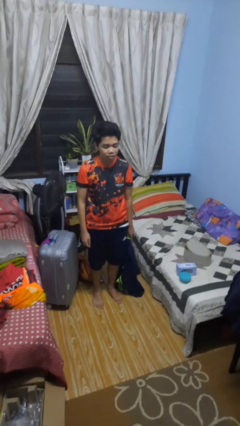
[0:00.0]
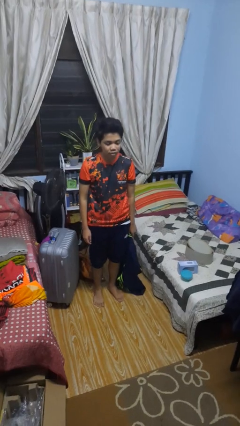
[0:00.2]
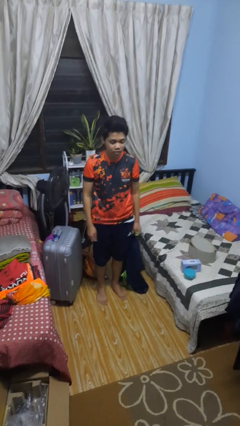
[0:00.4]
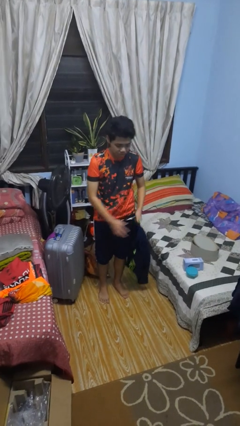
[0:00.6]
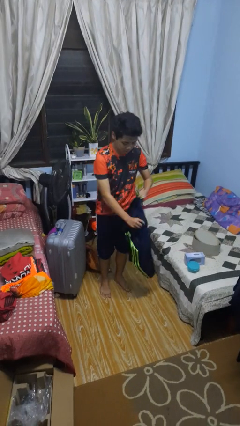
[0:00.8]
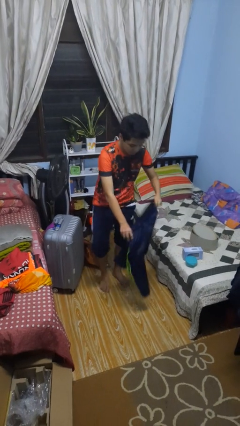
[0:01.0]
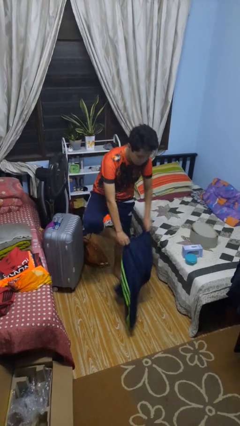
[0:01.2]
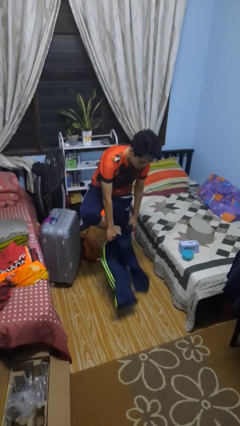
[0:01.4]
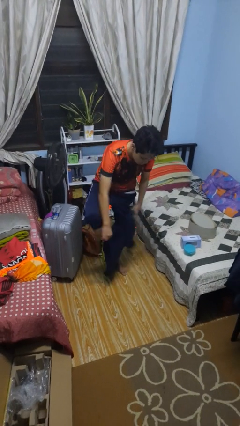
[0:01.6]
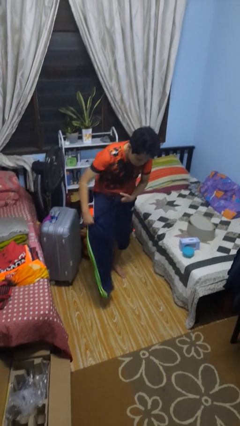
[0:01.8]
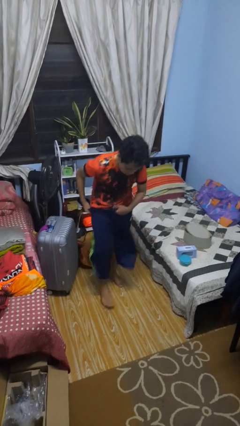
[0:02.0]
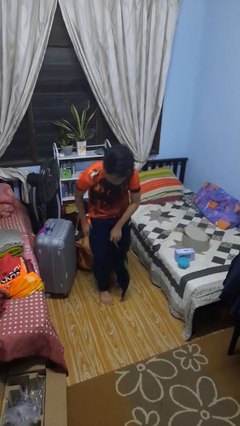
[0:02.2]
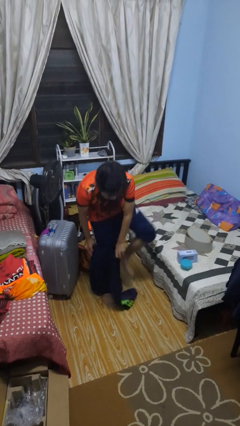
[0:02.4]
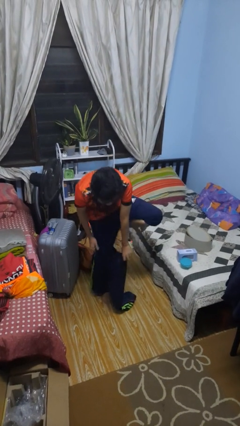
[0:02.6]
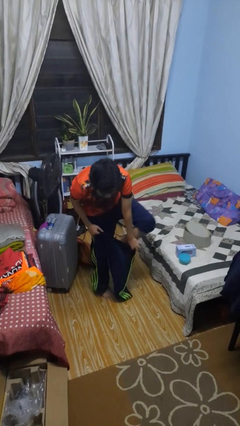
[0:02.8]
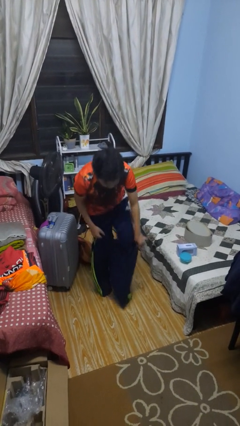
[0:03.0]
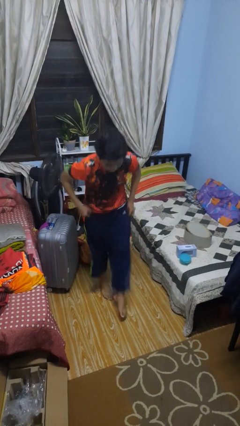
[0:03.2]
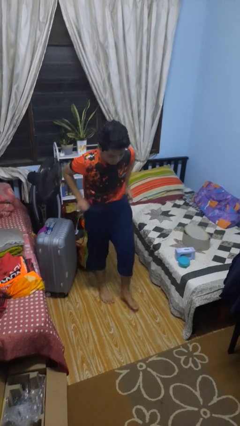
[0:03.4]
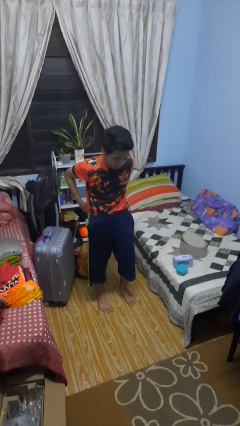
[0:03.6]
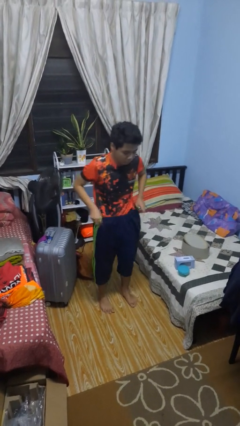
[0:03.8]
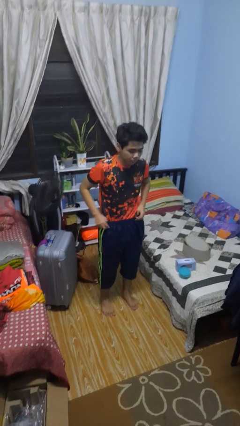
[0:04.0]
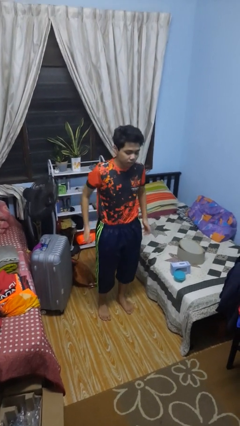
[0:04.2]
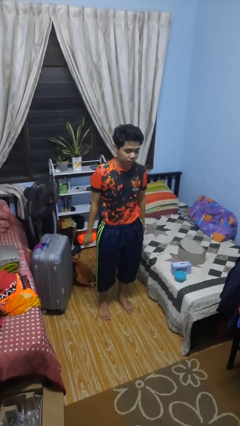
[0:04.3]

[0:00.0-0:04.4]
person puts on pants

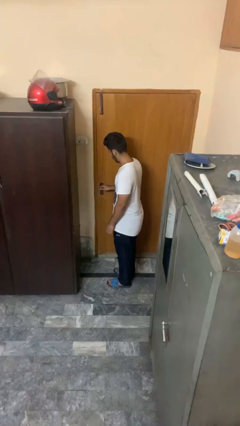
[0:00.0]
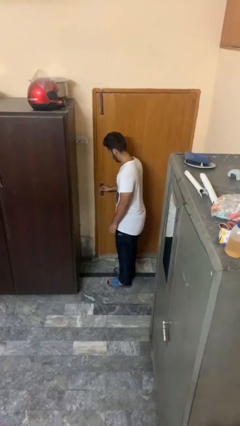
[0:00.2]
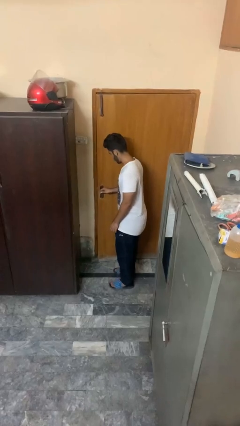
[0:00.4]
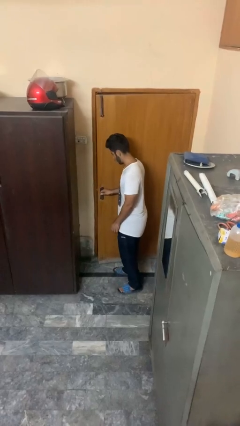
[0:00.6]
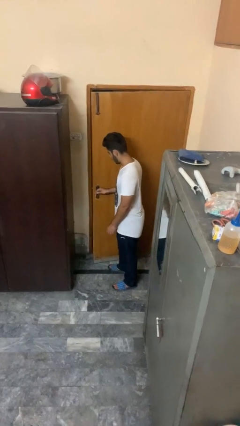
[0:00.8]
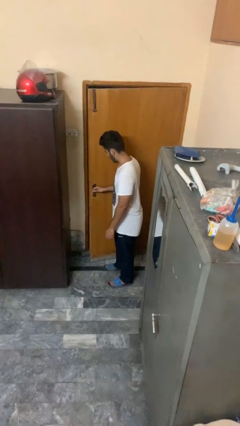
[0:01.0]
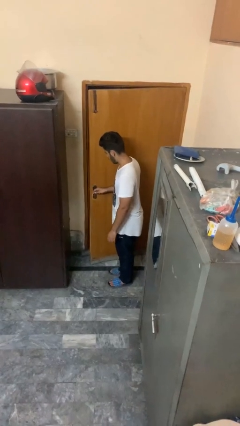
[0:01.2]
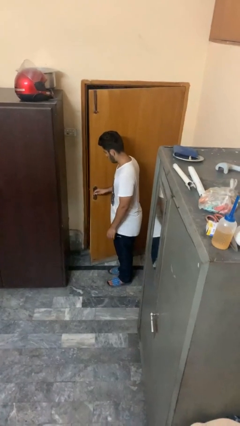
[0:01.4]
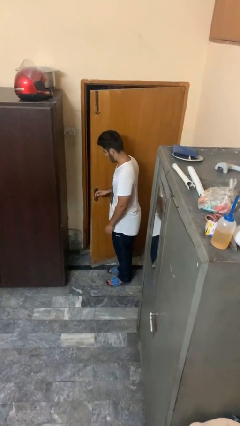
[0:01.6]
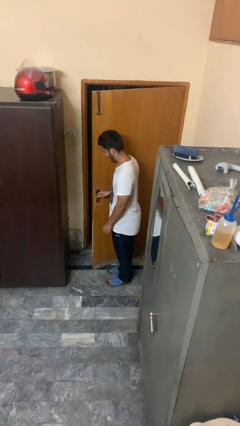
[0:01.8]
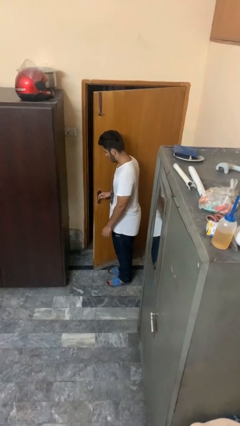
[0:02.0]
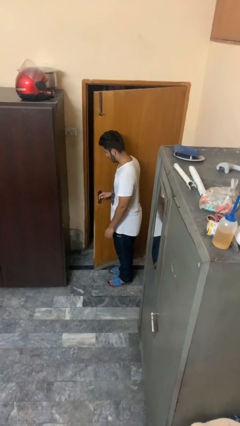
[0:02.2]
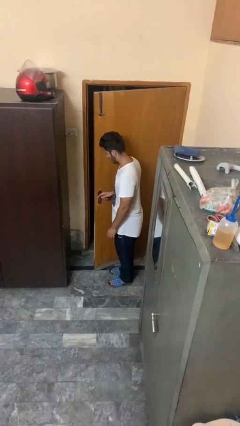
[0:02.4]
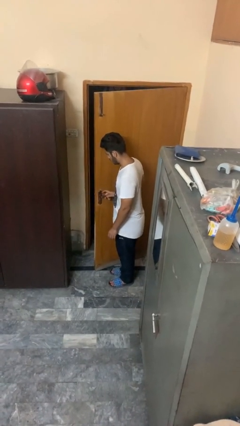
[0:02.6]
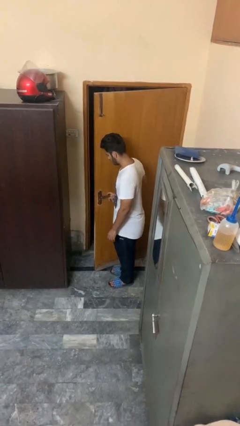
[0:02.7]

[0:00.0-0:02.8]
person opens facility door

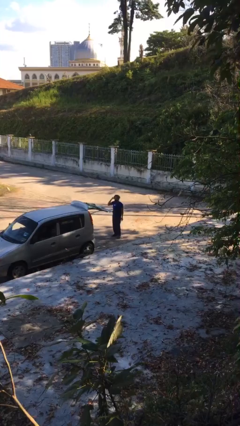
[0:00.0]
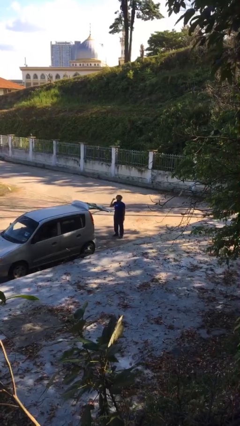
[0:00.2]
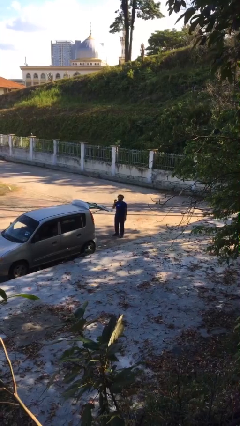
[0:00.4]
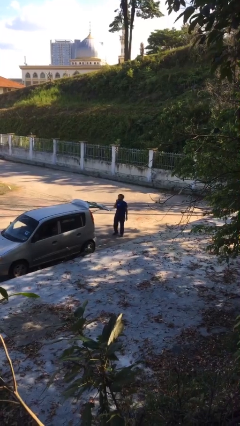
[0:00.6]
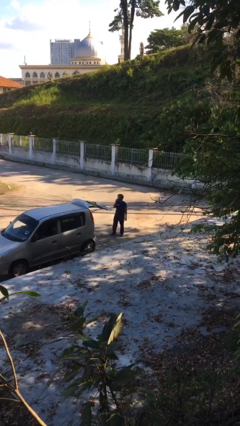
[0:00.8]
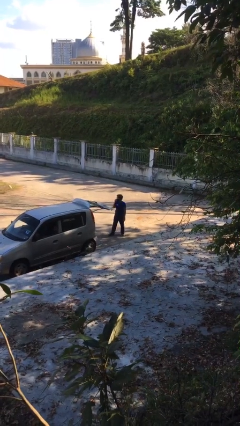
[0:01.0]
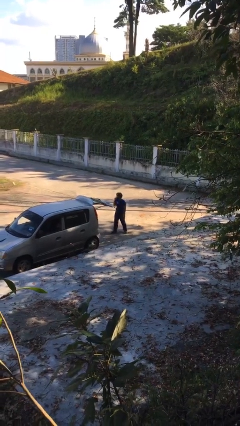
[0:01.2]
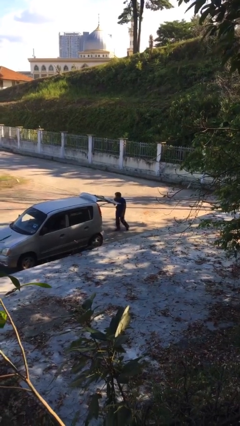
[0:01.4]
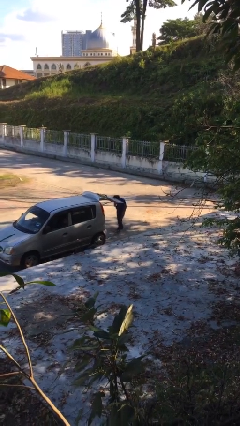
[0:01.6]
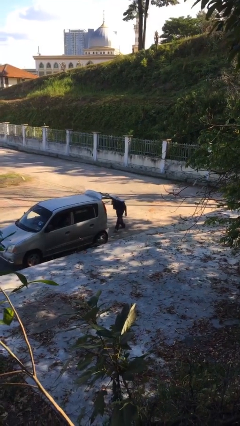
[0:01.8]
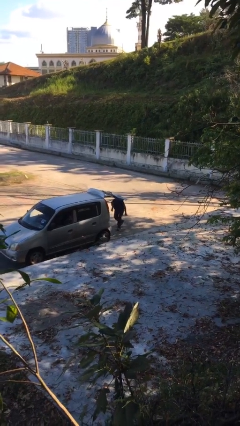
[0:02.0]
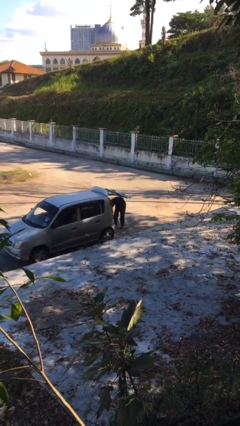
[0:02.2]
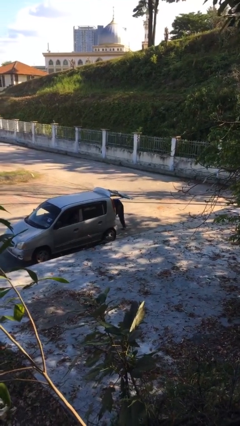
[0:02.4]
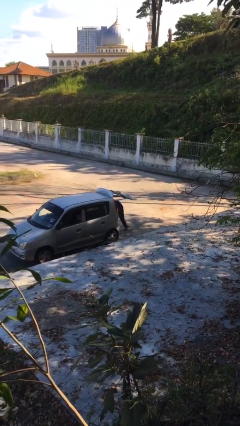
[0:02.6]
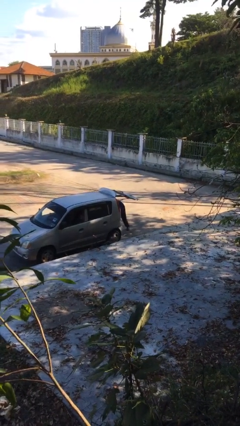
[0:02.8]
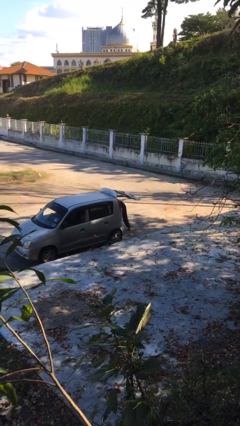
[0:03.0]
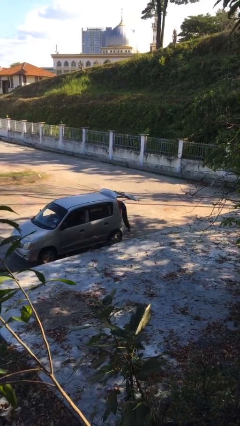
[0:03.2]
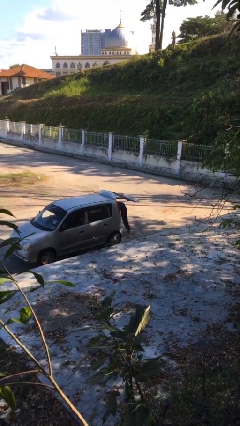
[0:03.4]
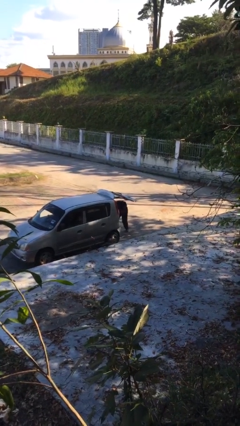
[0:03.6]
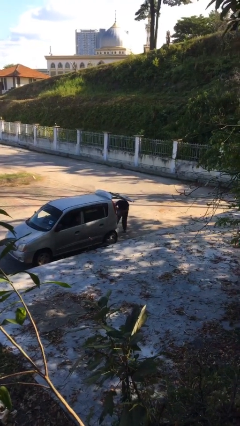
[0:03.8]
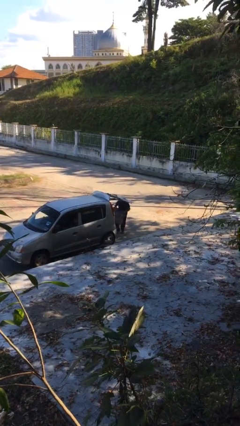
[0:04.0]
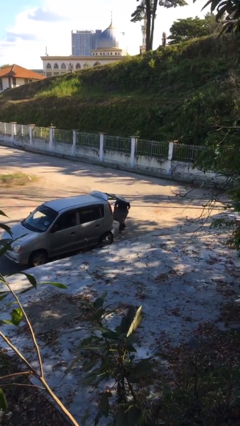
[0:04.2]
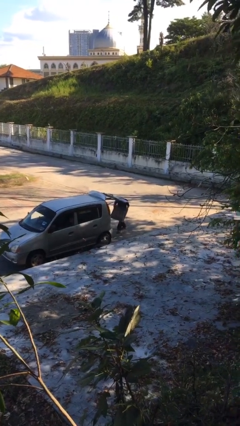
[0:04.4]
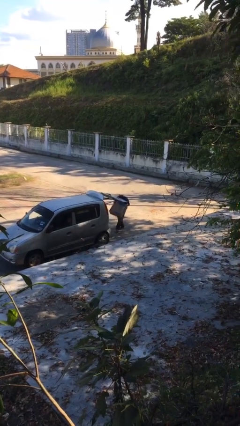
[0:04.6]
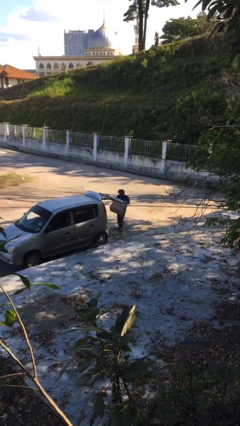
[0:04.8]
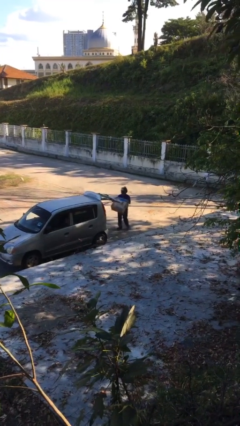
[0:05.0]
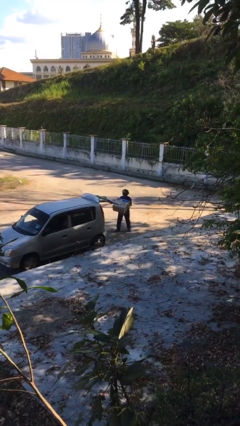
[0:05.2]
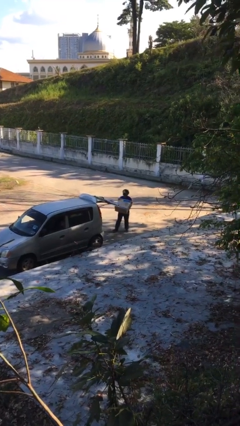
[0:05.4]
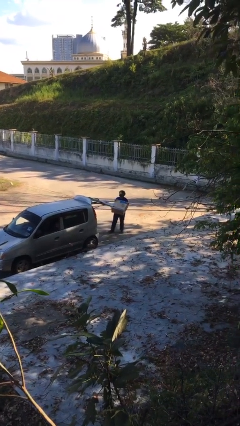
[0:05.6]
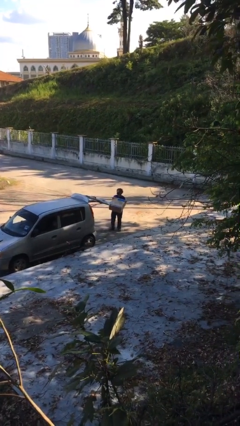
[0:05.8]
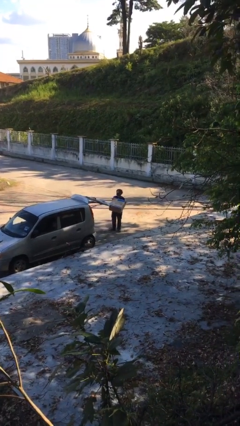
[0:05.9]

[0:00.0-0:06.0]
person unloads car

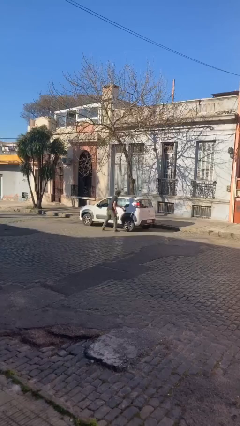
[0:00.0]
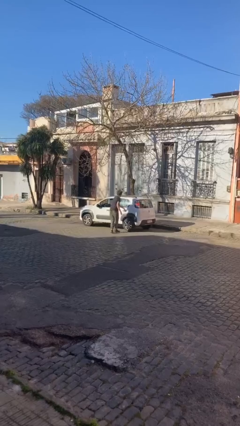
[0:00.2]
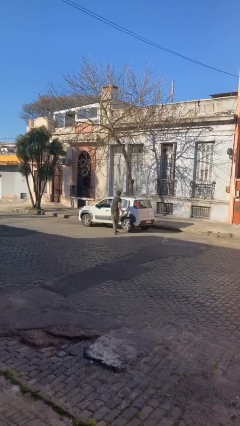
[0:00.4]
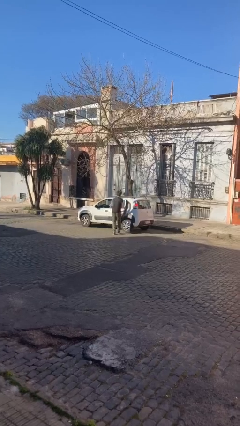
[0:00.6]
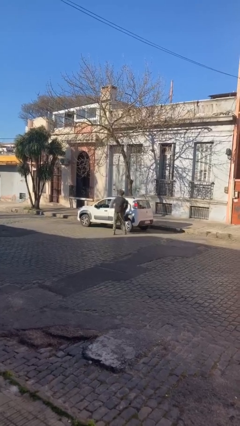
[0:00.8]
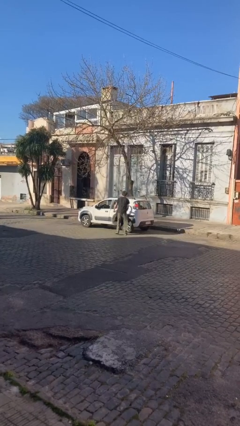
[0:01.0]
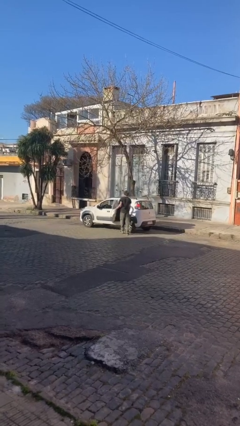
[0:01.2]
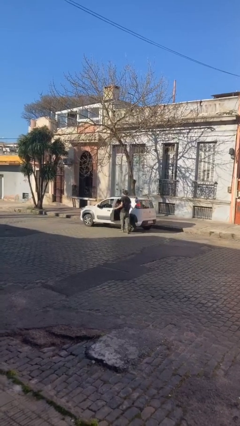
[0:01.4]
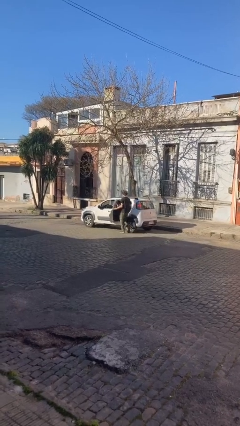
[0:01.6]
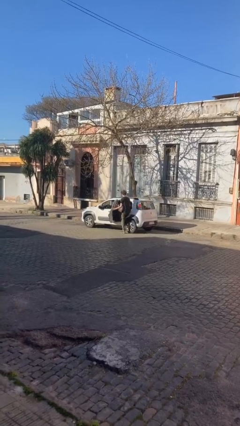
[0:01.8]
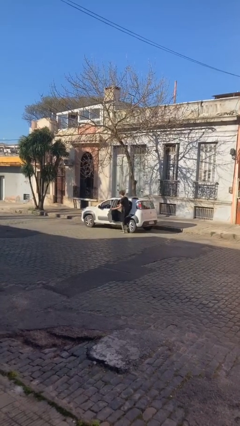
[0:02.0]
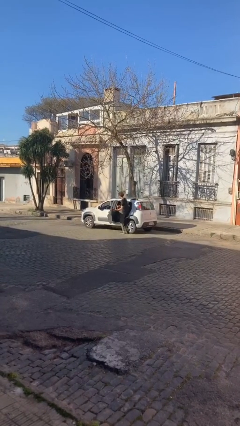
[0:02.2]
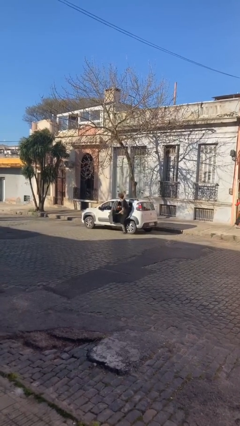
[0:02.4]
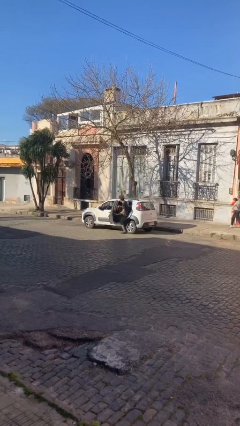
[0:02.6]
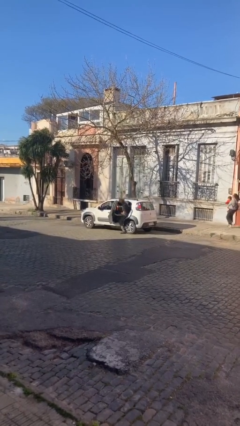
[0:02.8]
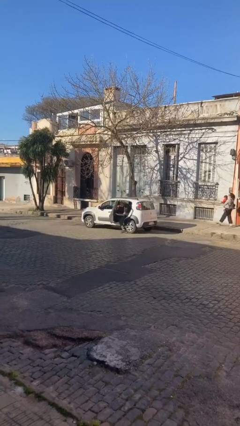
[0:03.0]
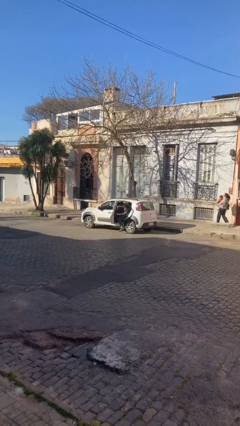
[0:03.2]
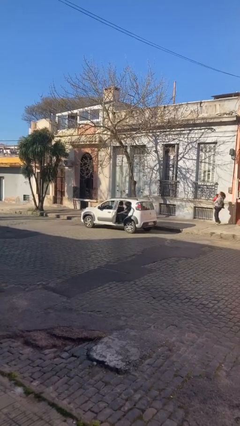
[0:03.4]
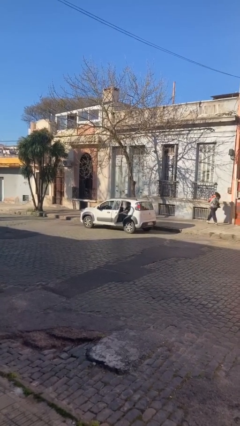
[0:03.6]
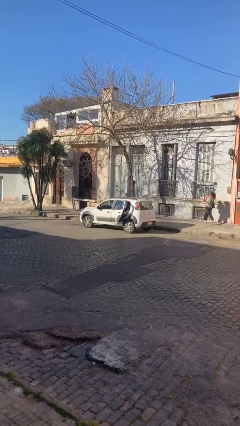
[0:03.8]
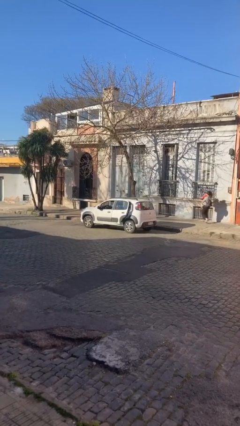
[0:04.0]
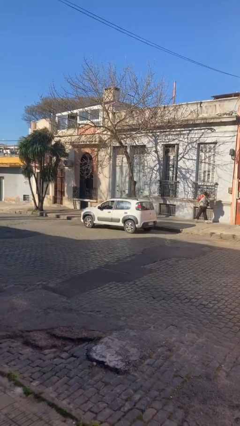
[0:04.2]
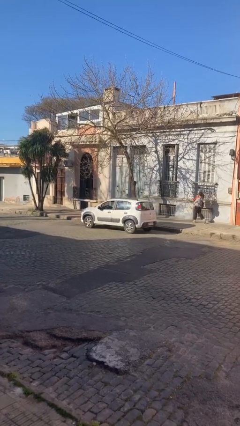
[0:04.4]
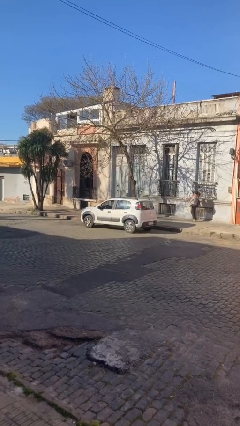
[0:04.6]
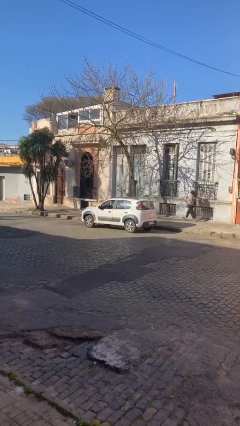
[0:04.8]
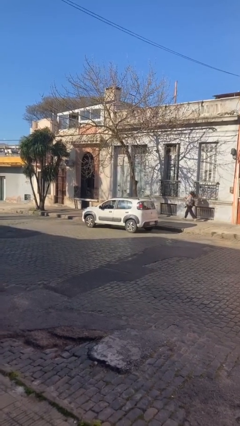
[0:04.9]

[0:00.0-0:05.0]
car picks up person
